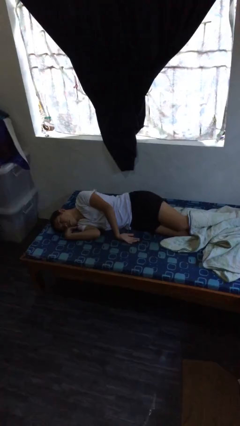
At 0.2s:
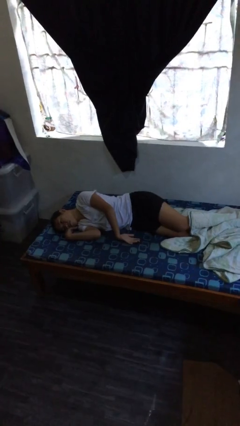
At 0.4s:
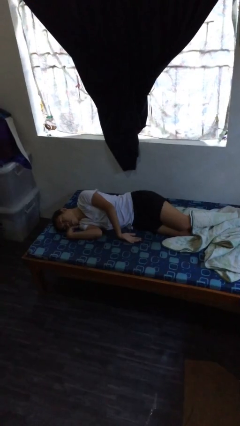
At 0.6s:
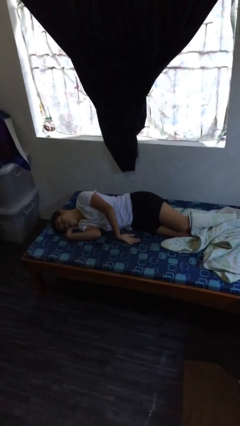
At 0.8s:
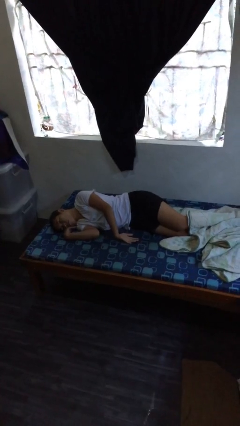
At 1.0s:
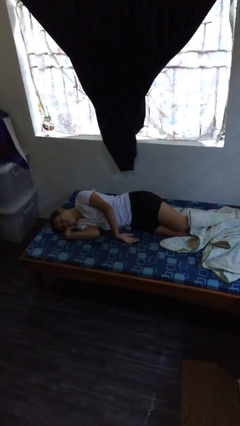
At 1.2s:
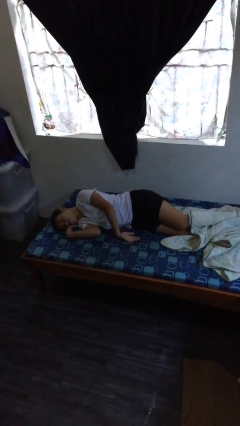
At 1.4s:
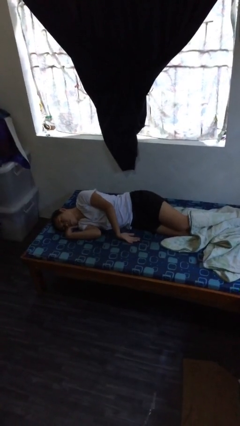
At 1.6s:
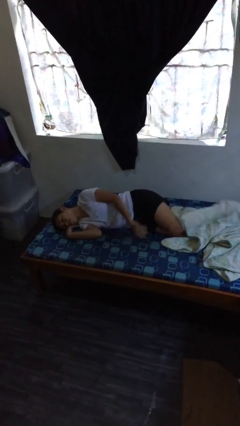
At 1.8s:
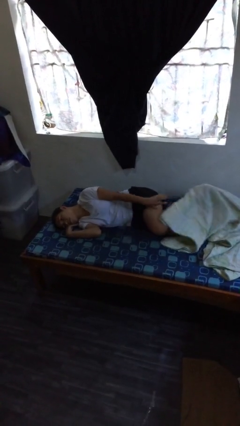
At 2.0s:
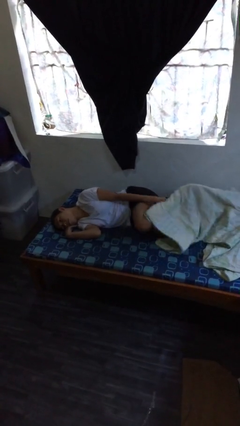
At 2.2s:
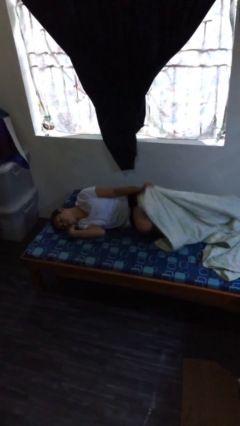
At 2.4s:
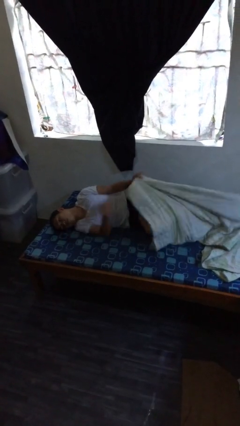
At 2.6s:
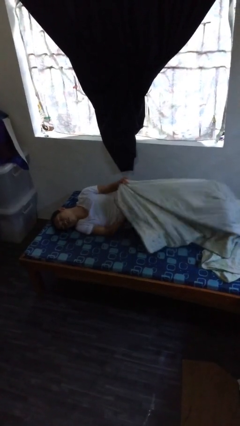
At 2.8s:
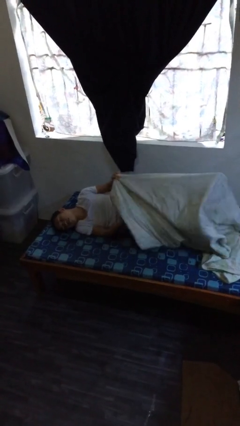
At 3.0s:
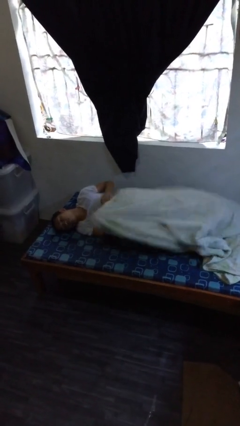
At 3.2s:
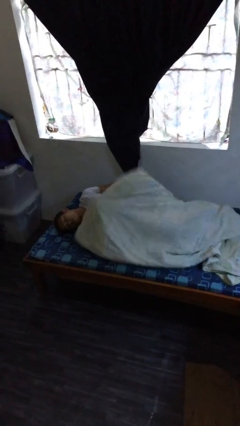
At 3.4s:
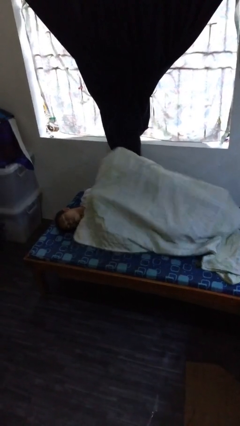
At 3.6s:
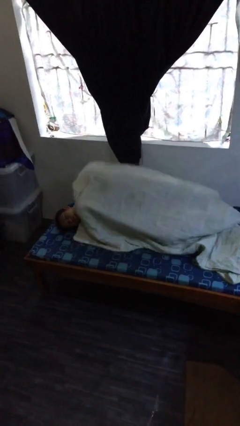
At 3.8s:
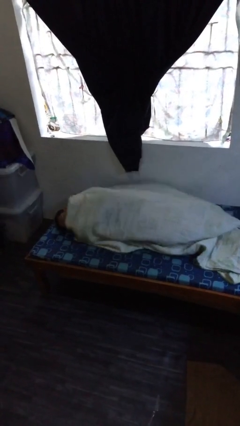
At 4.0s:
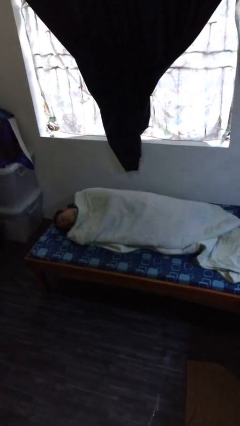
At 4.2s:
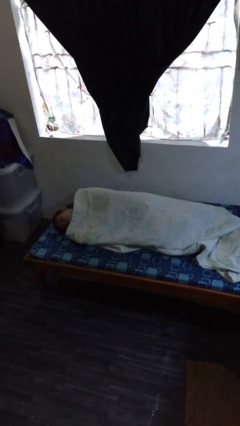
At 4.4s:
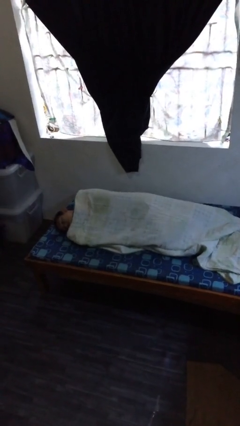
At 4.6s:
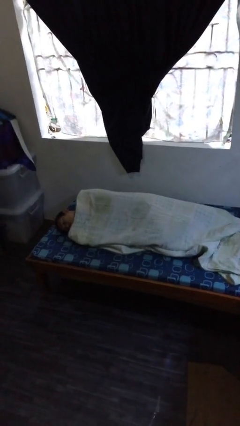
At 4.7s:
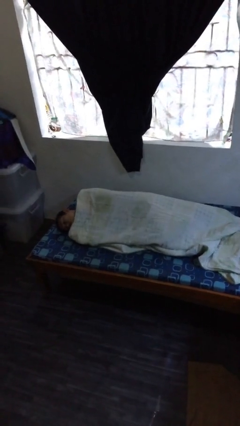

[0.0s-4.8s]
person covers with bedsheets

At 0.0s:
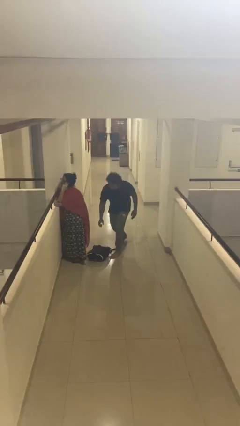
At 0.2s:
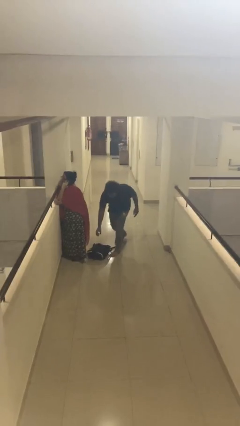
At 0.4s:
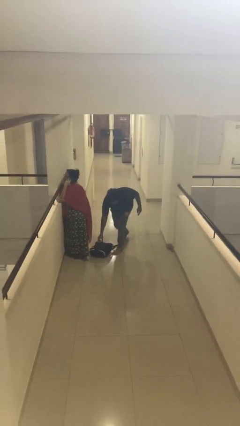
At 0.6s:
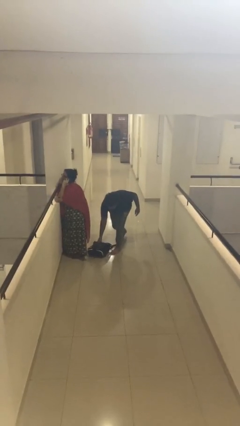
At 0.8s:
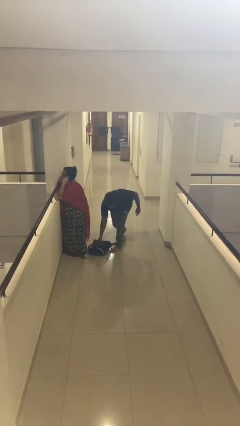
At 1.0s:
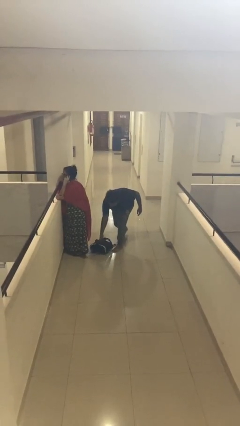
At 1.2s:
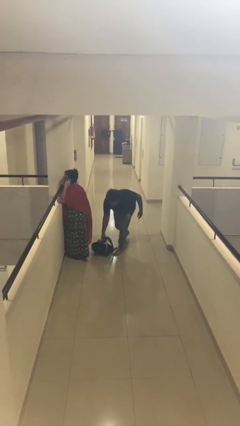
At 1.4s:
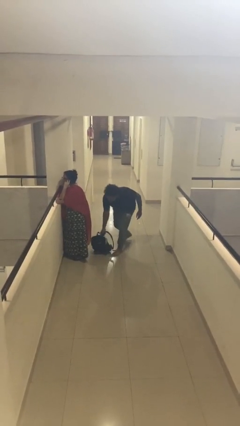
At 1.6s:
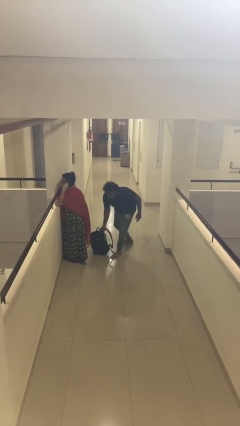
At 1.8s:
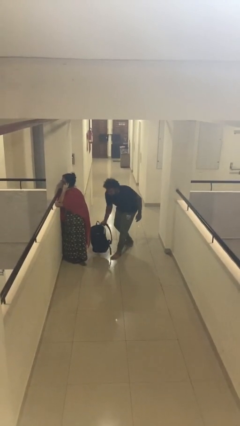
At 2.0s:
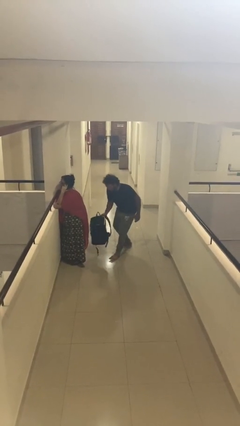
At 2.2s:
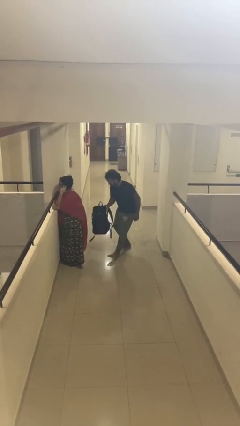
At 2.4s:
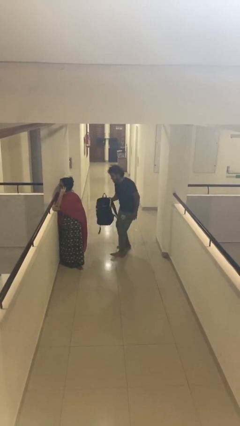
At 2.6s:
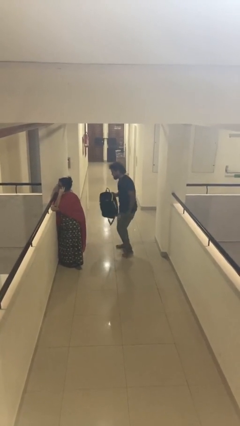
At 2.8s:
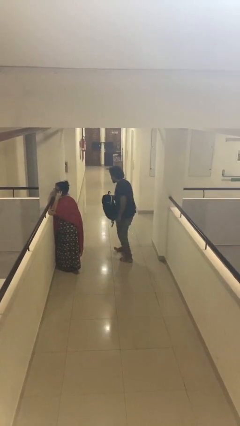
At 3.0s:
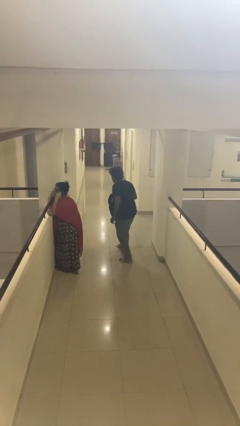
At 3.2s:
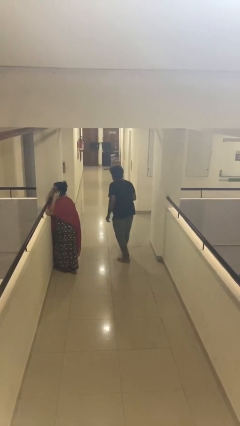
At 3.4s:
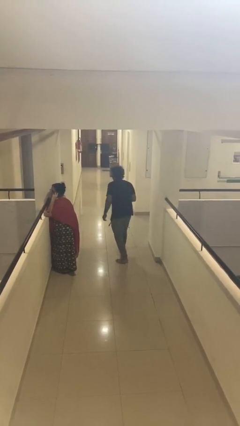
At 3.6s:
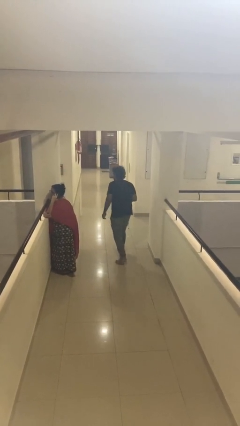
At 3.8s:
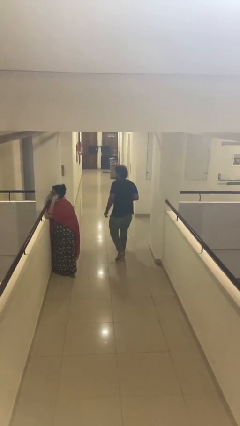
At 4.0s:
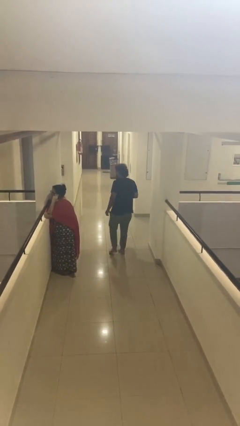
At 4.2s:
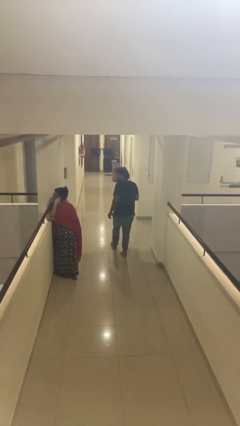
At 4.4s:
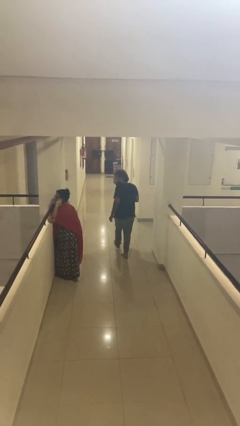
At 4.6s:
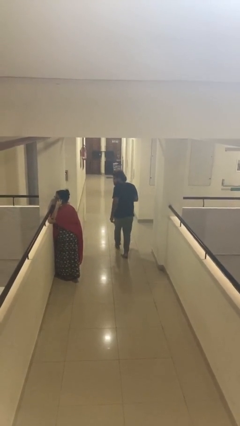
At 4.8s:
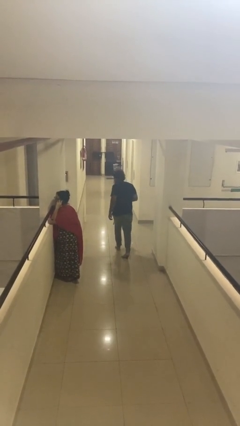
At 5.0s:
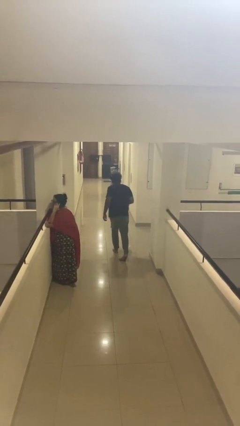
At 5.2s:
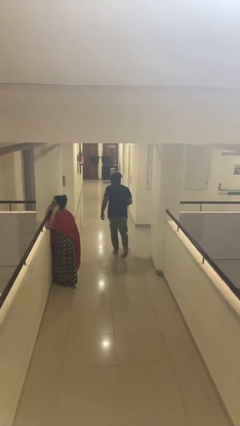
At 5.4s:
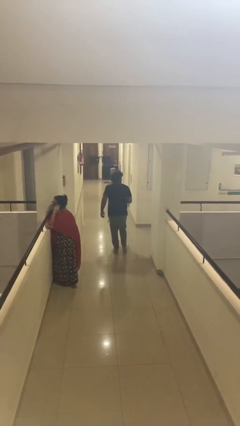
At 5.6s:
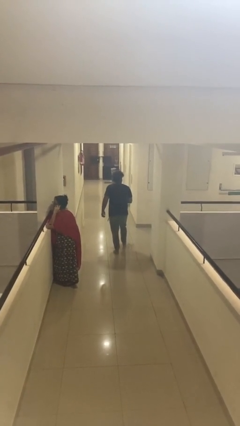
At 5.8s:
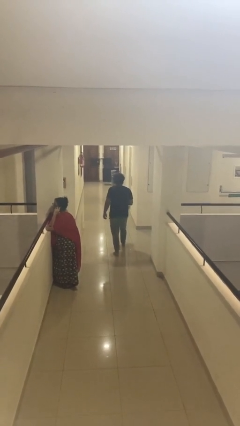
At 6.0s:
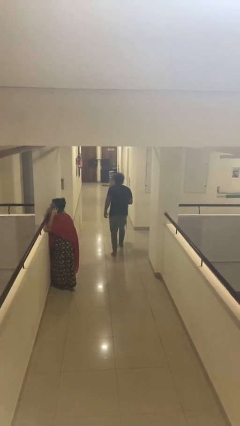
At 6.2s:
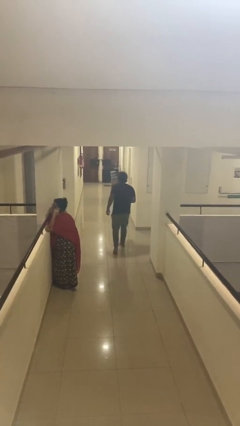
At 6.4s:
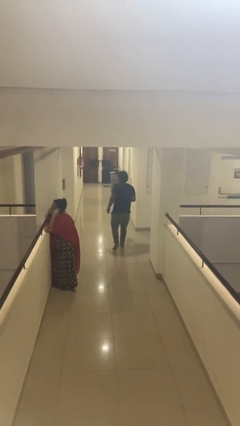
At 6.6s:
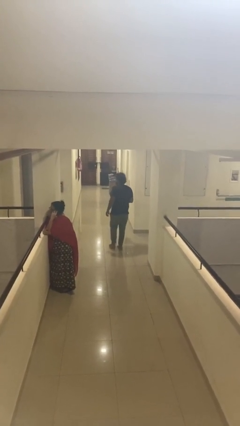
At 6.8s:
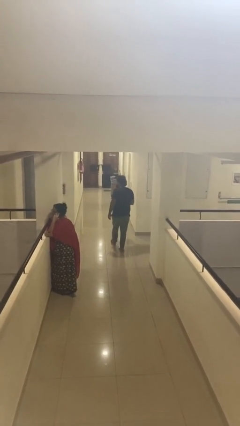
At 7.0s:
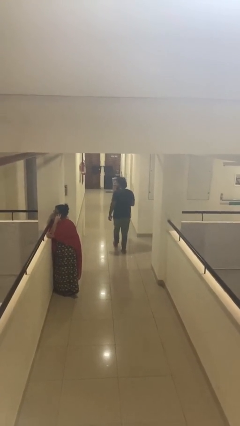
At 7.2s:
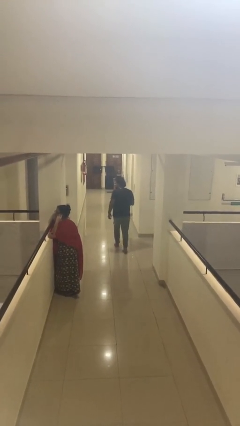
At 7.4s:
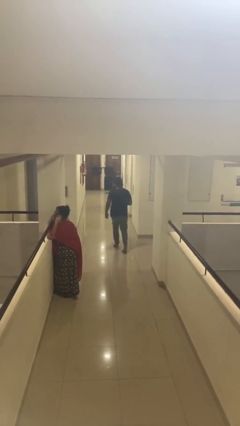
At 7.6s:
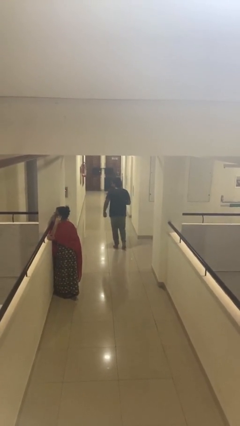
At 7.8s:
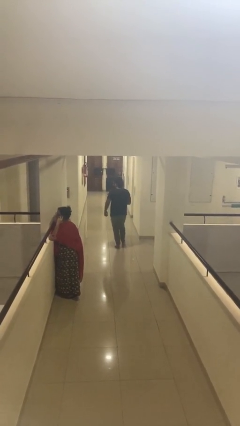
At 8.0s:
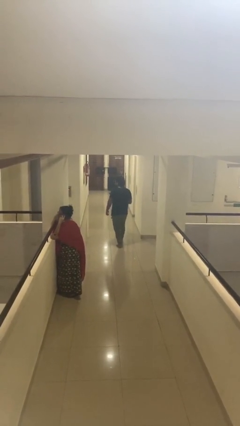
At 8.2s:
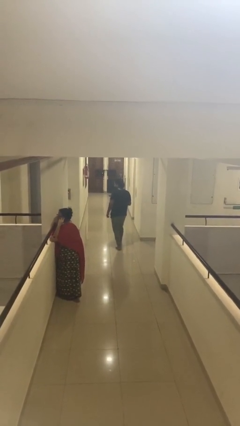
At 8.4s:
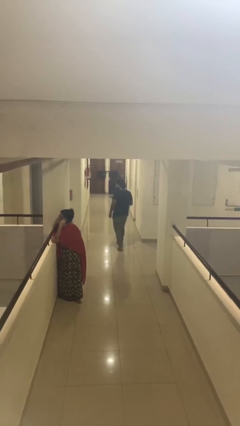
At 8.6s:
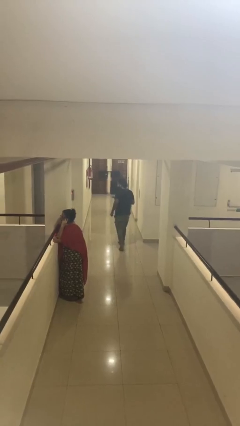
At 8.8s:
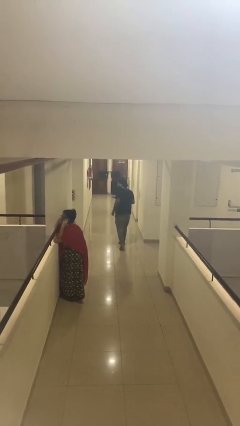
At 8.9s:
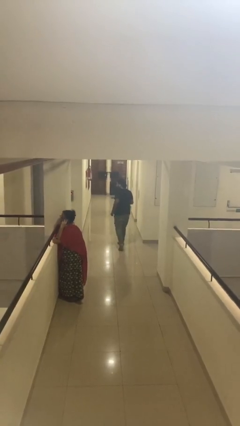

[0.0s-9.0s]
person steals object from person

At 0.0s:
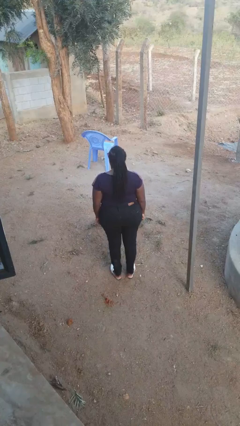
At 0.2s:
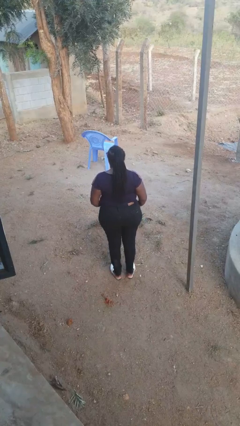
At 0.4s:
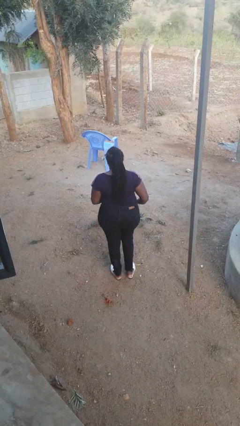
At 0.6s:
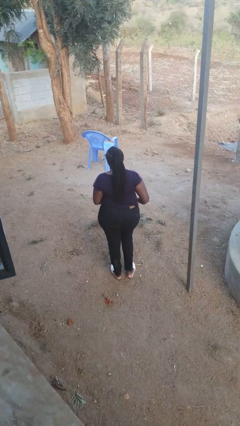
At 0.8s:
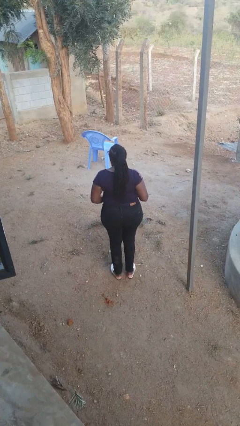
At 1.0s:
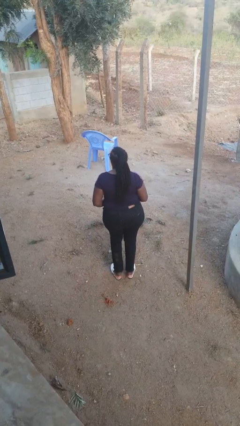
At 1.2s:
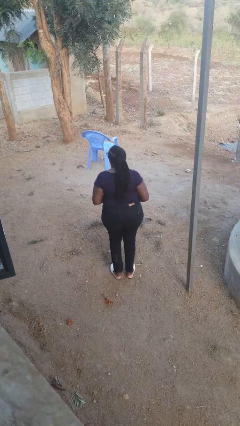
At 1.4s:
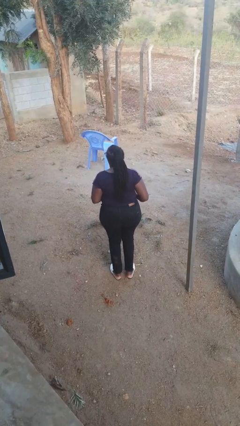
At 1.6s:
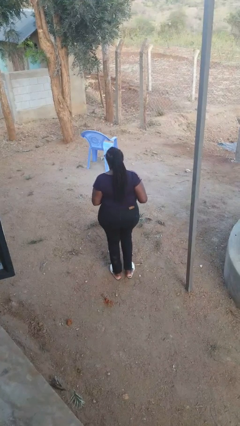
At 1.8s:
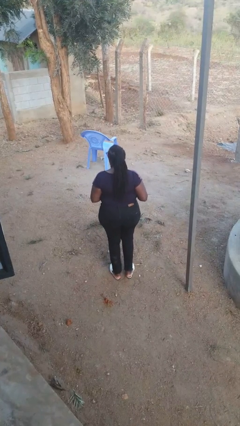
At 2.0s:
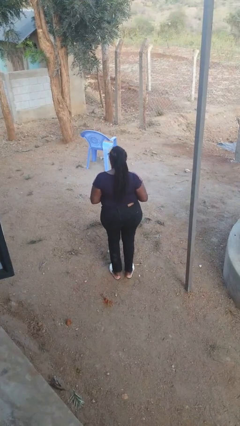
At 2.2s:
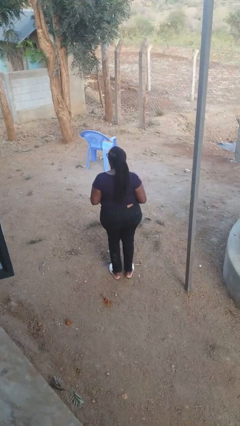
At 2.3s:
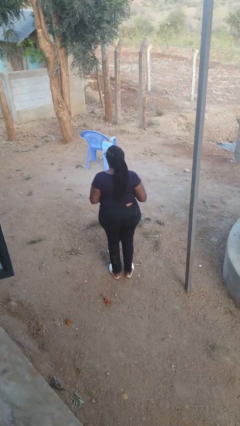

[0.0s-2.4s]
person wiggles hips

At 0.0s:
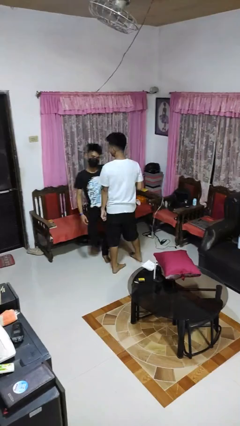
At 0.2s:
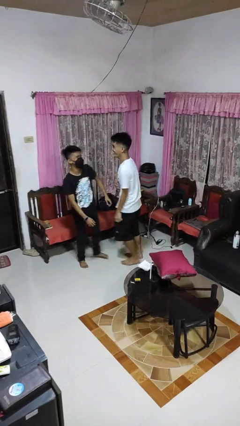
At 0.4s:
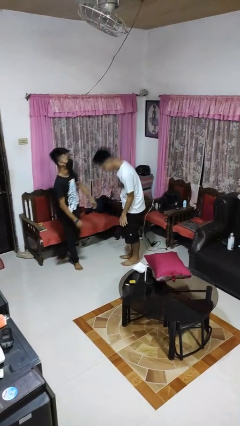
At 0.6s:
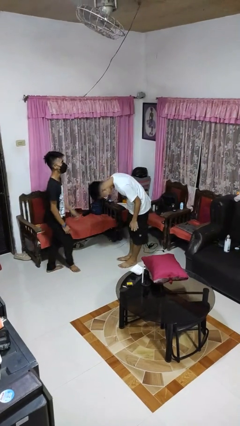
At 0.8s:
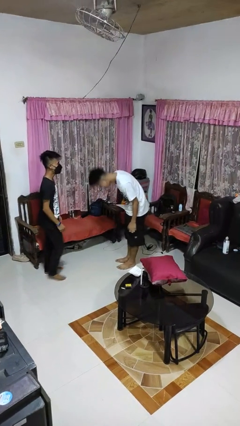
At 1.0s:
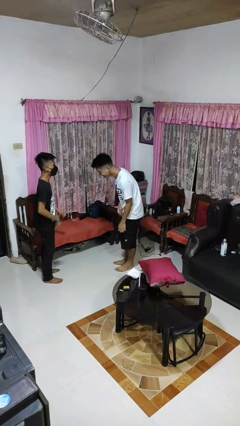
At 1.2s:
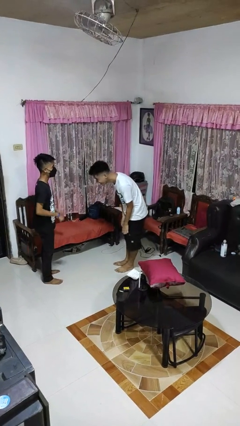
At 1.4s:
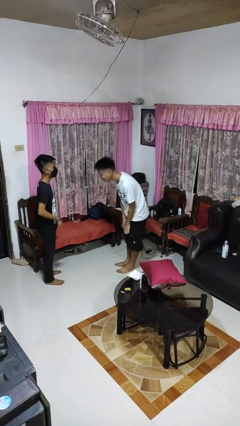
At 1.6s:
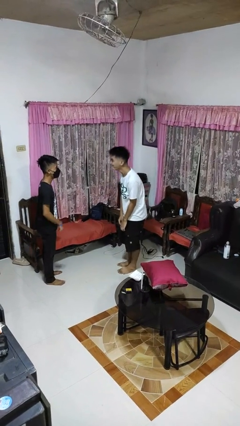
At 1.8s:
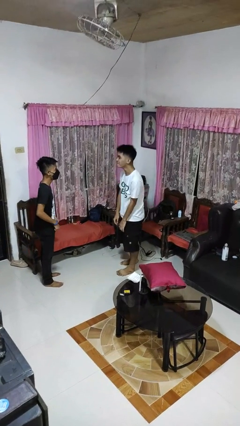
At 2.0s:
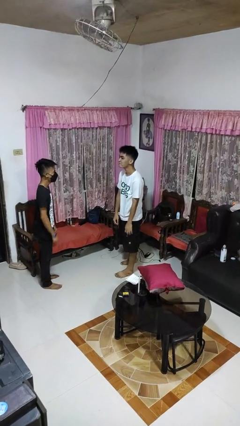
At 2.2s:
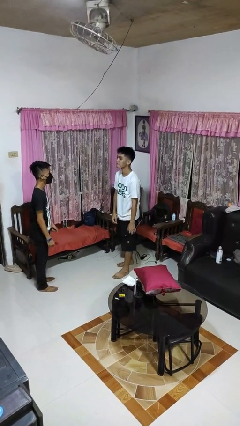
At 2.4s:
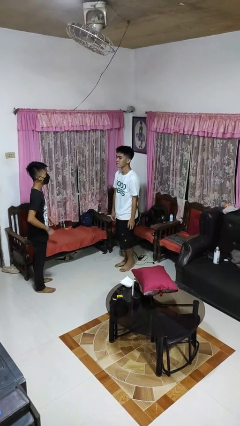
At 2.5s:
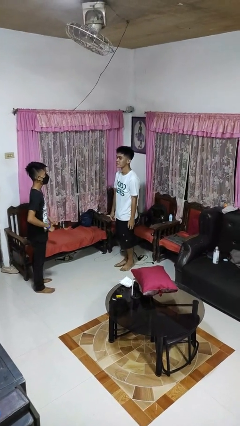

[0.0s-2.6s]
person bumps into person
